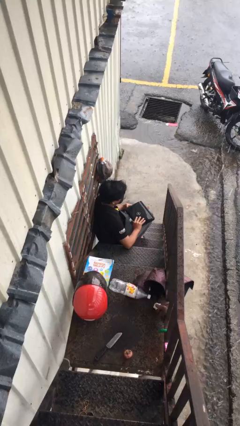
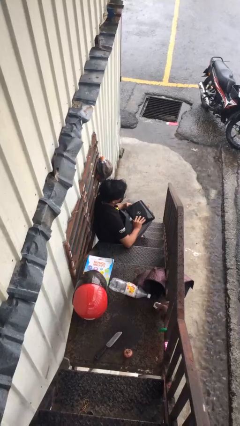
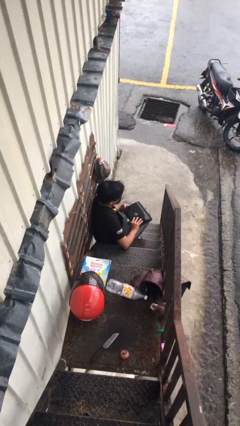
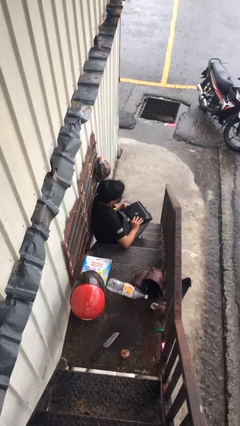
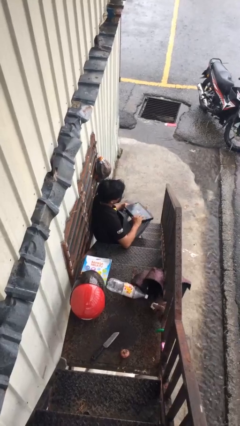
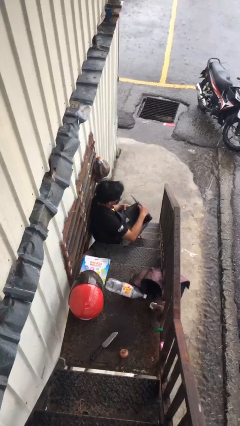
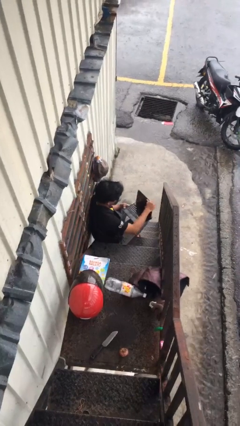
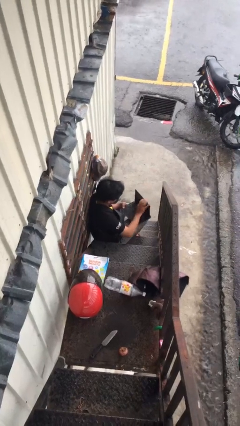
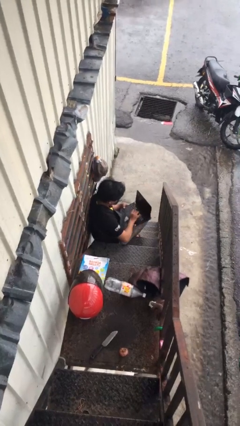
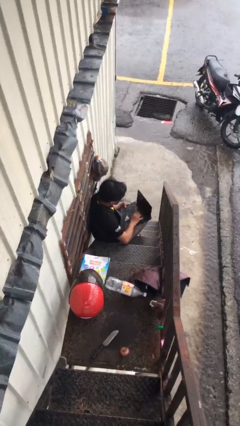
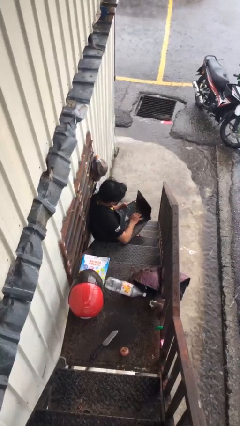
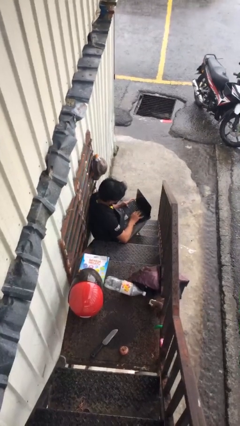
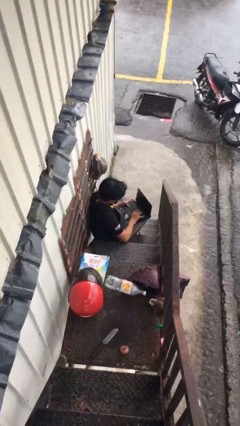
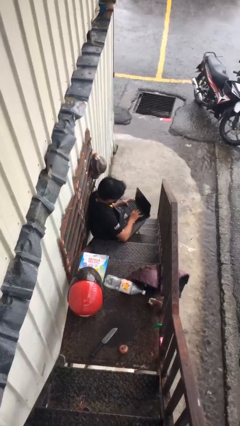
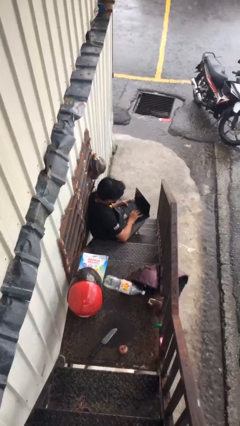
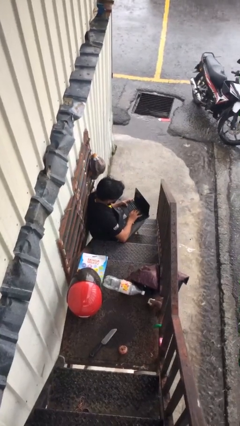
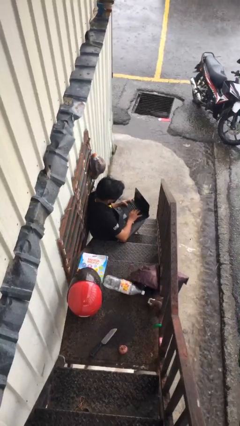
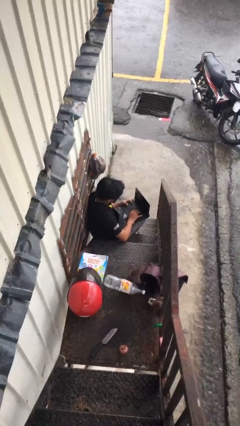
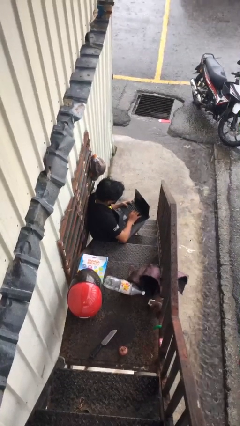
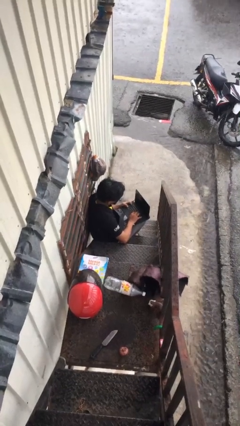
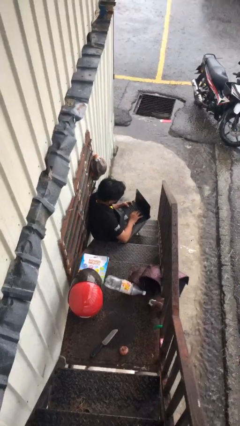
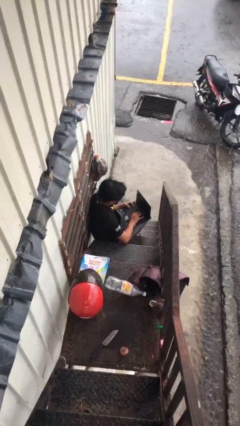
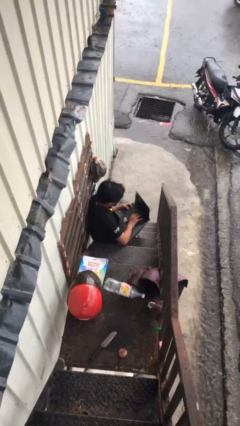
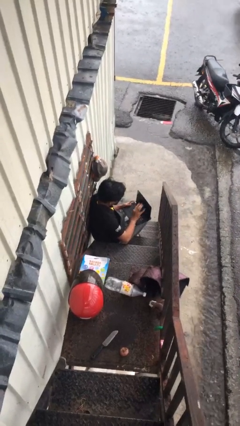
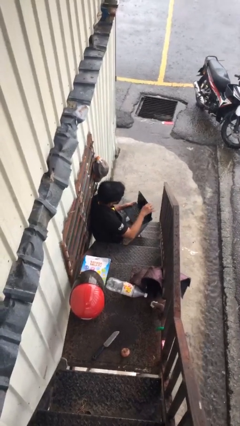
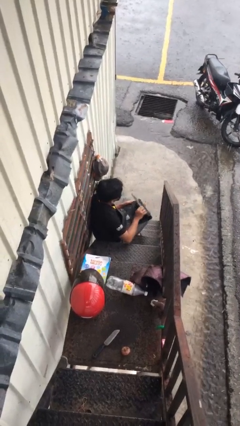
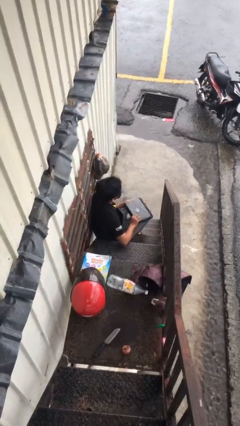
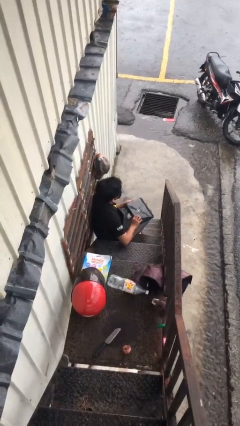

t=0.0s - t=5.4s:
person interacts with laptop

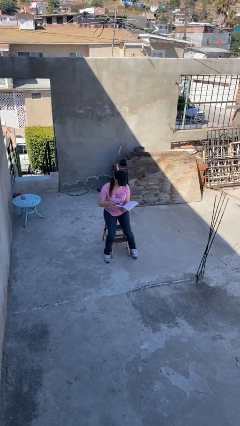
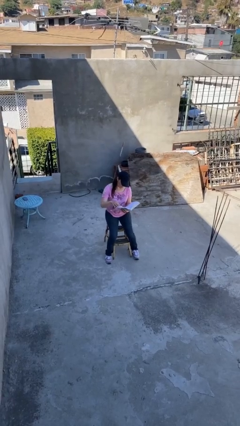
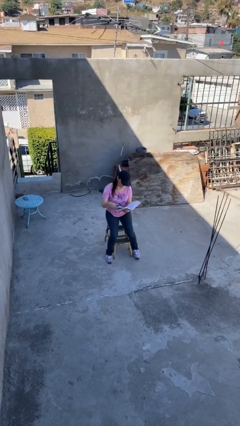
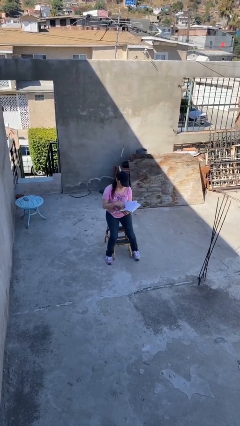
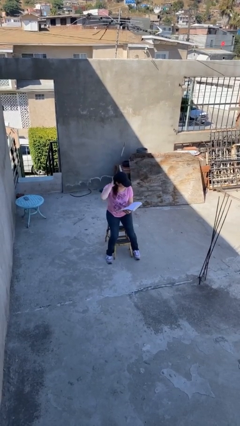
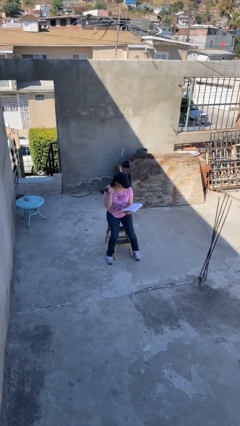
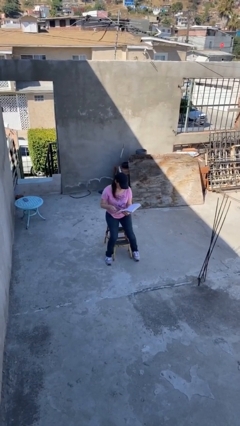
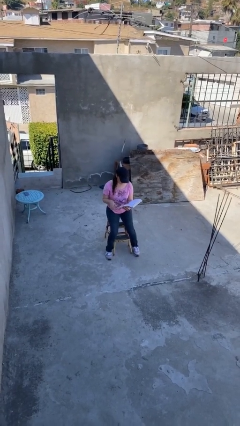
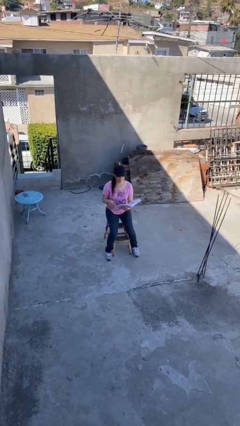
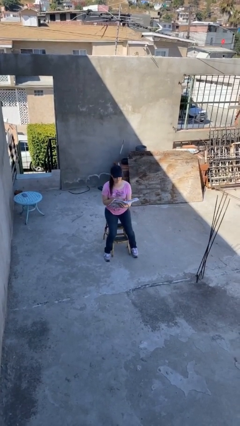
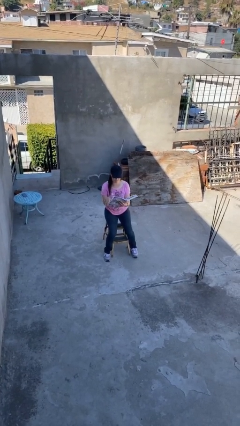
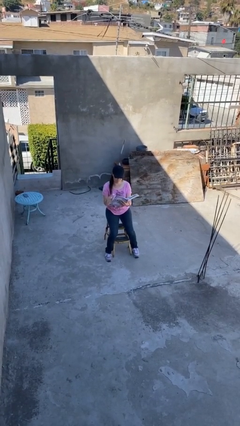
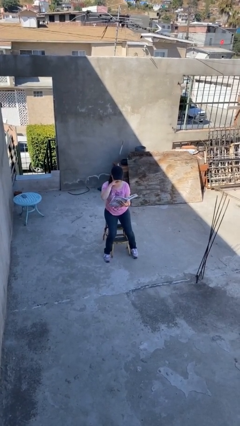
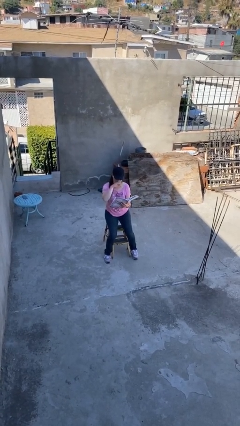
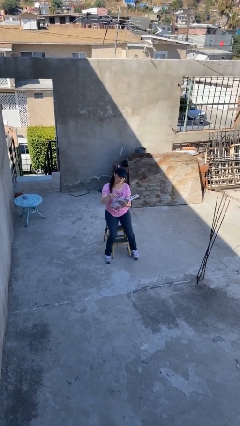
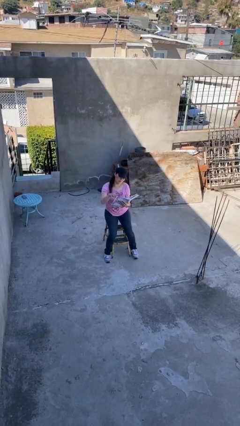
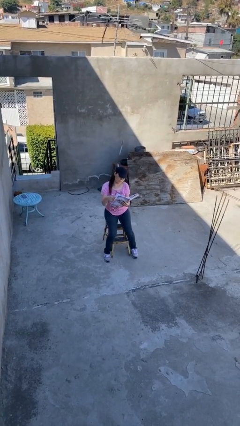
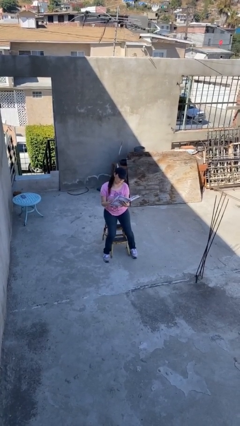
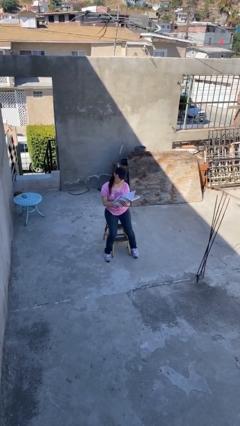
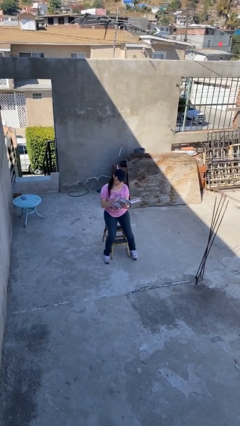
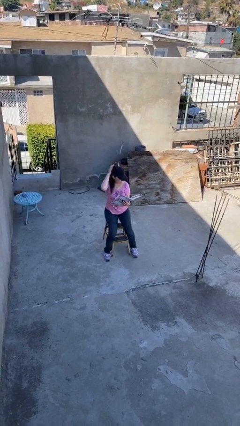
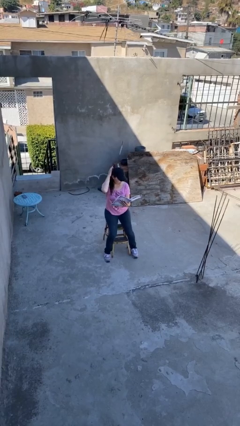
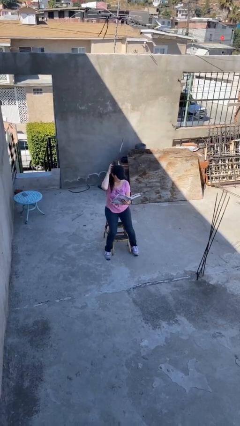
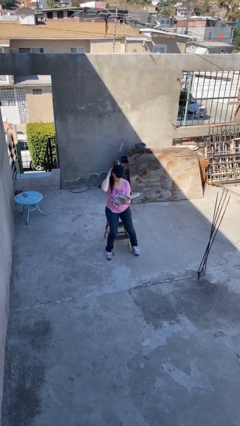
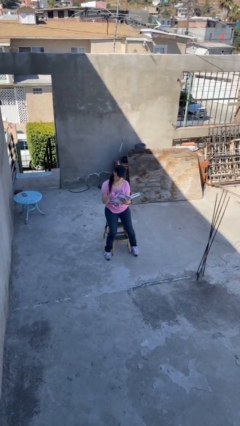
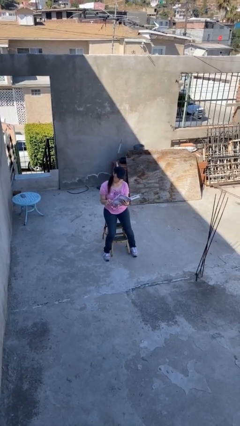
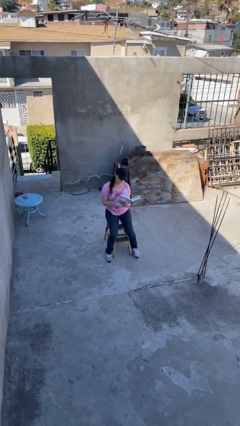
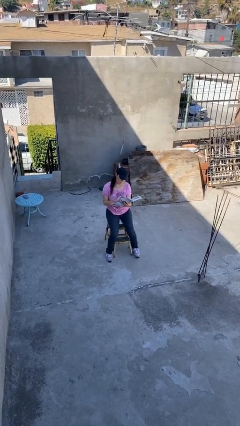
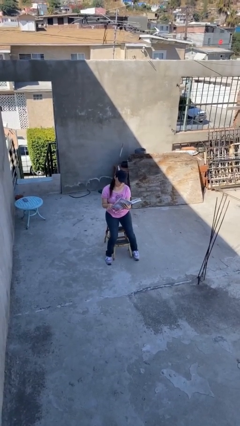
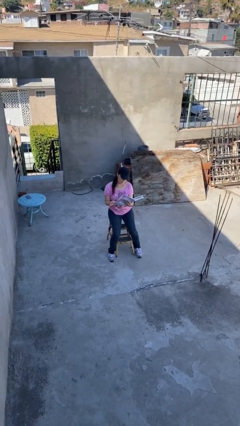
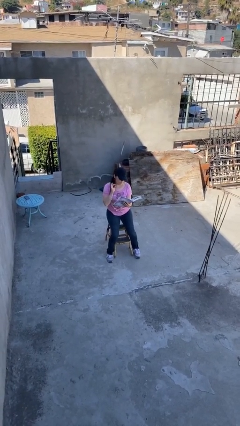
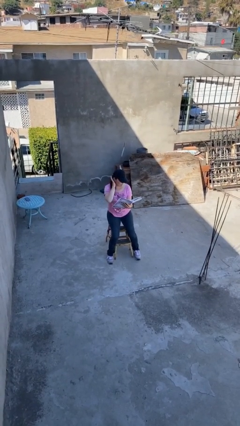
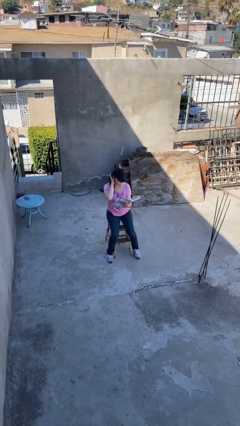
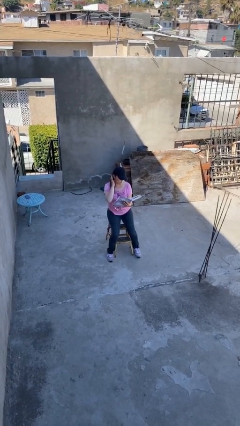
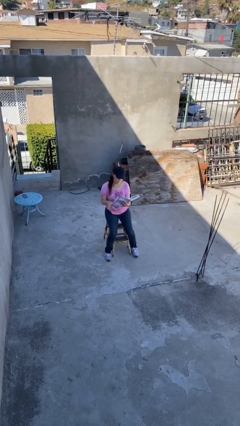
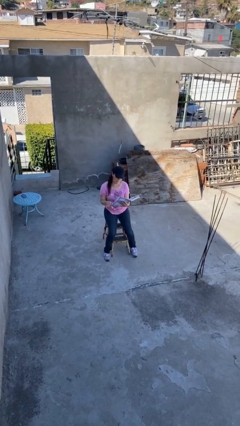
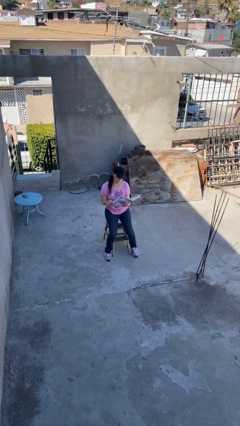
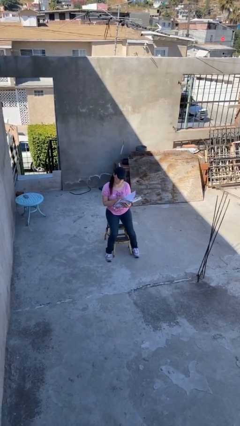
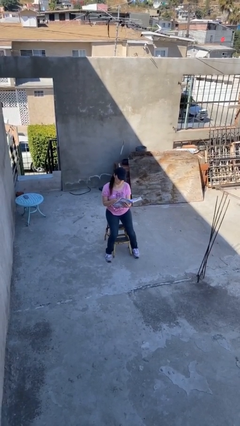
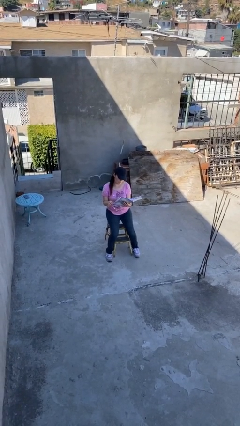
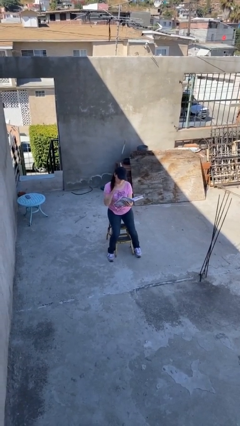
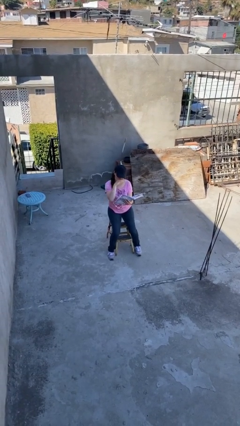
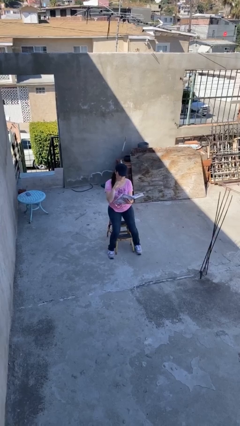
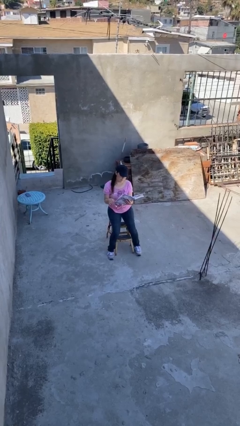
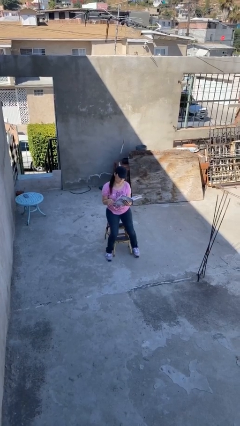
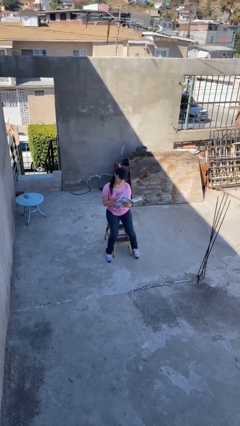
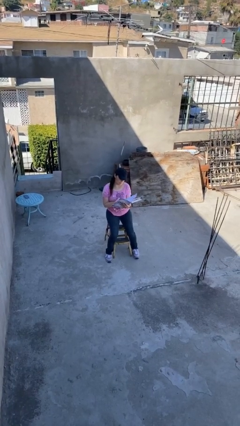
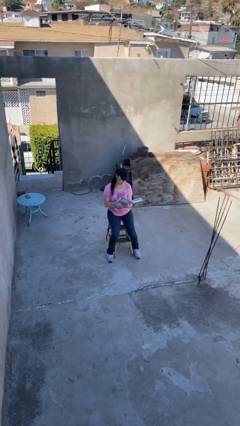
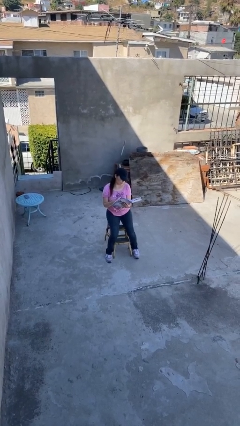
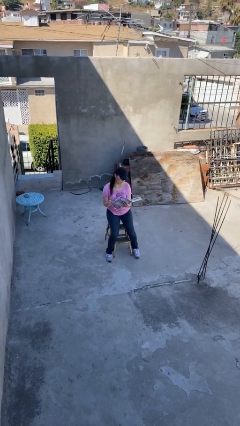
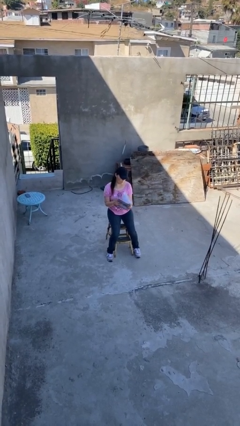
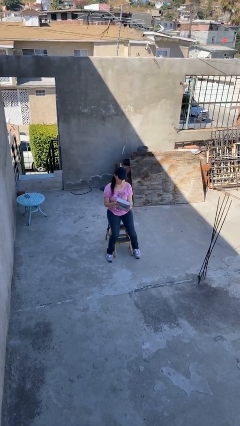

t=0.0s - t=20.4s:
person reads document

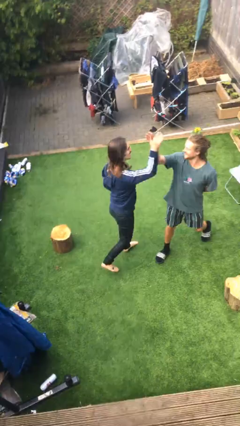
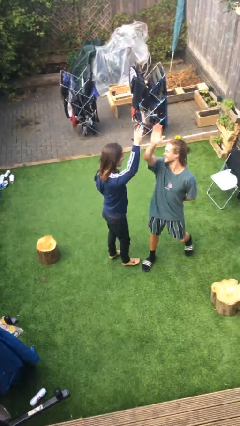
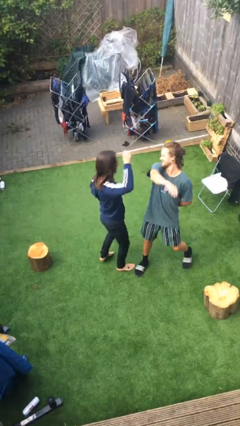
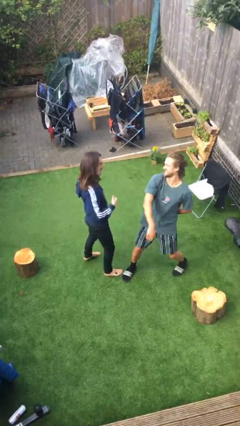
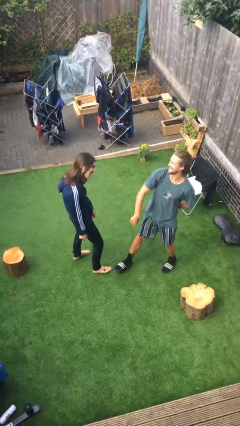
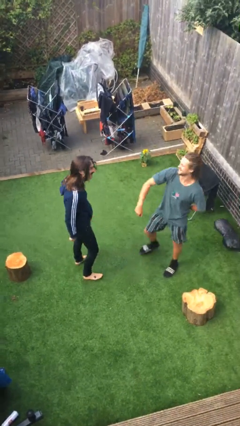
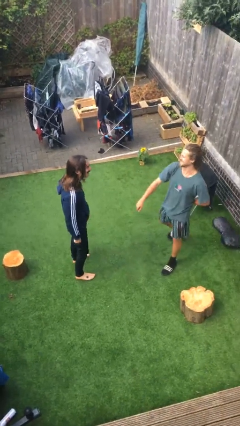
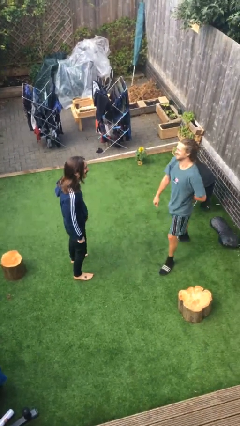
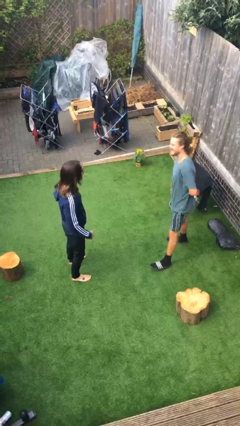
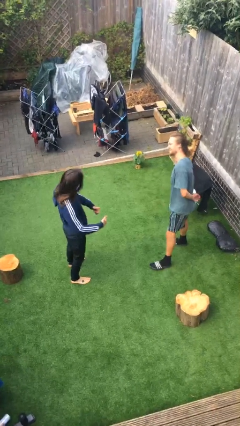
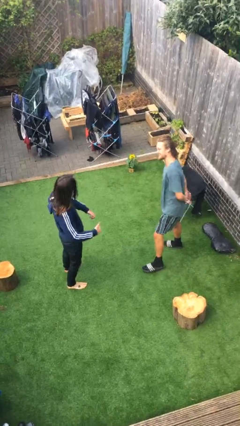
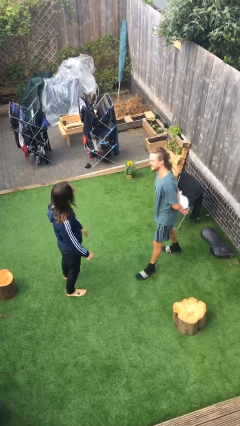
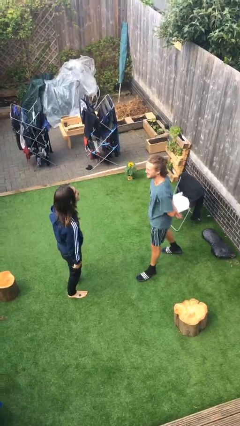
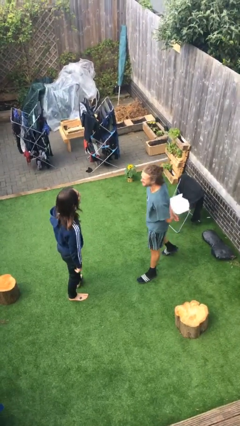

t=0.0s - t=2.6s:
person highfives hand
